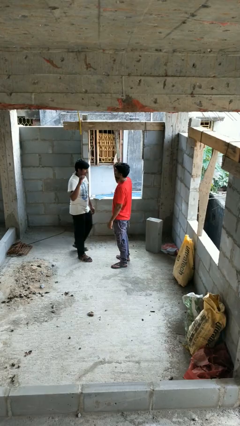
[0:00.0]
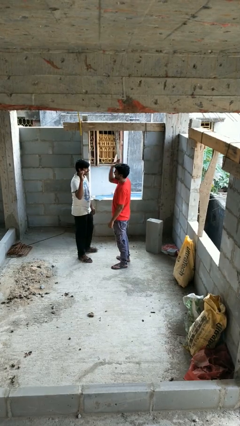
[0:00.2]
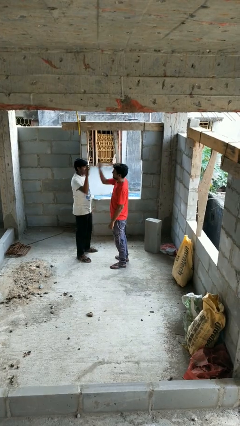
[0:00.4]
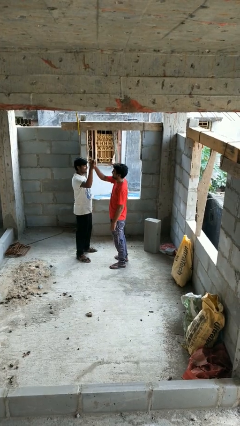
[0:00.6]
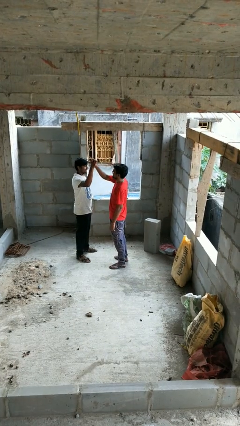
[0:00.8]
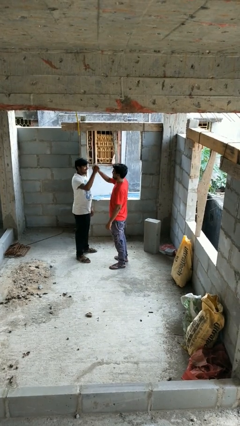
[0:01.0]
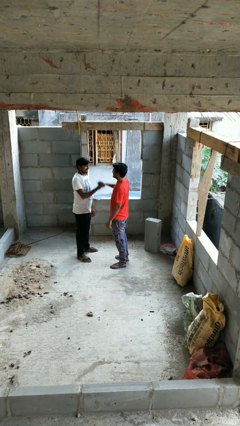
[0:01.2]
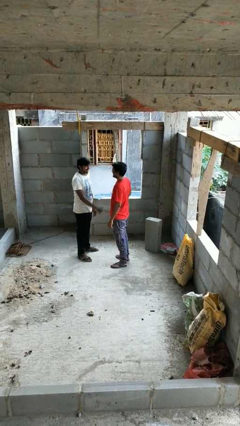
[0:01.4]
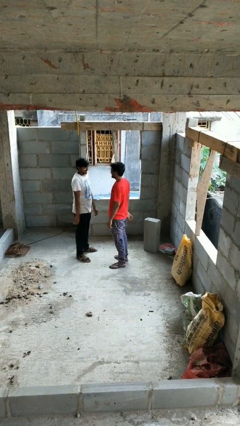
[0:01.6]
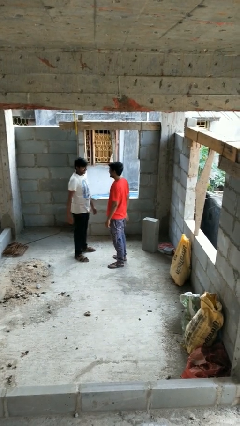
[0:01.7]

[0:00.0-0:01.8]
person highfives hand

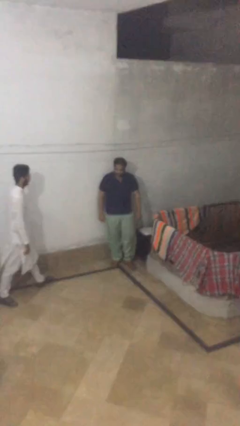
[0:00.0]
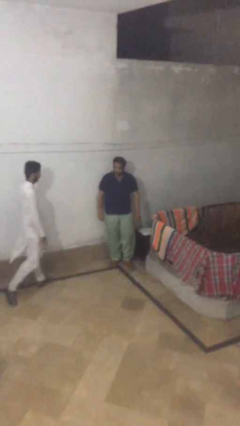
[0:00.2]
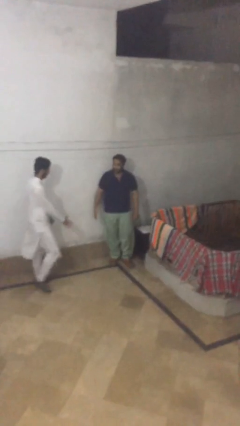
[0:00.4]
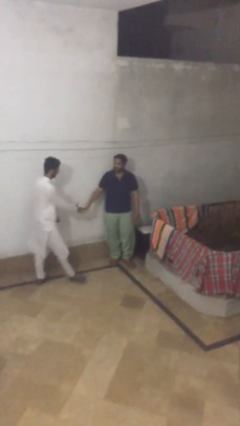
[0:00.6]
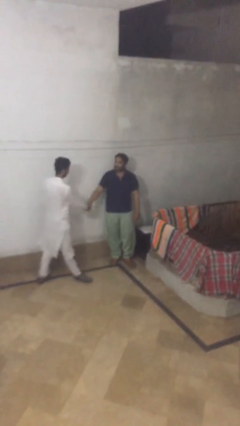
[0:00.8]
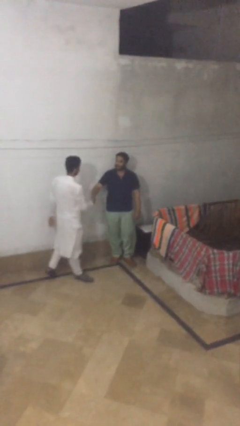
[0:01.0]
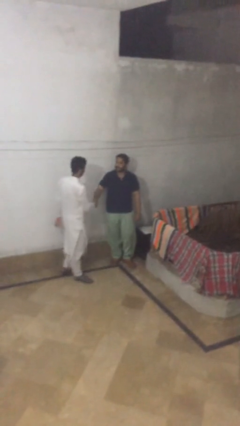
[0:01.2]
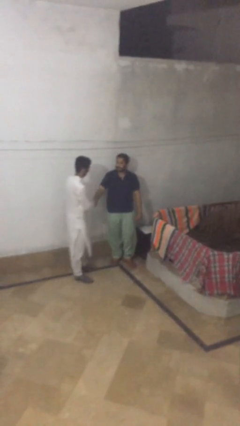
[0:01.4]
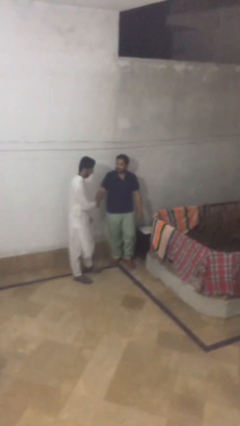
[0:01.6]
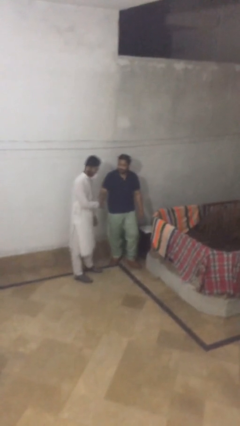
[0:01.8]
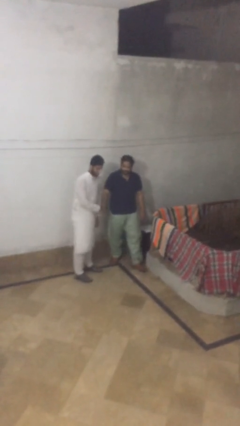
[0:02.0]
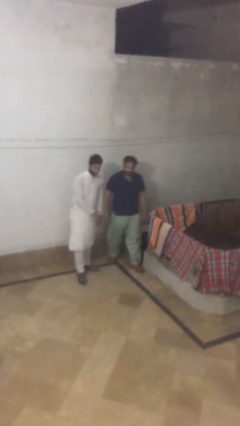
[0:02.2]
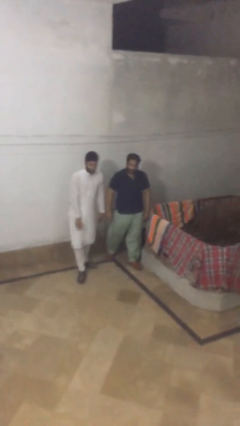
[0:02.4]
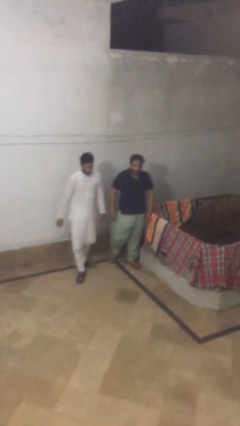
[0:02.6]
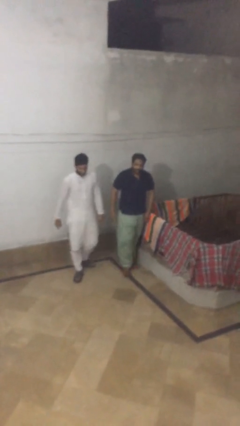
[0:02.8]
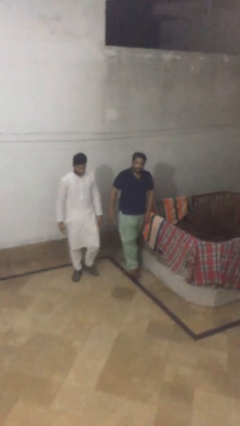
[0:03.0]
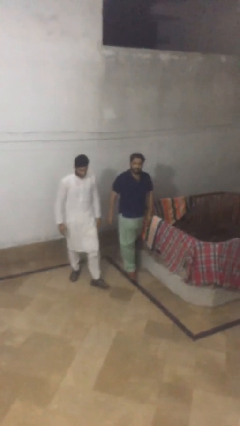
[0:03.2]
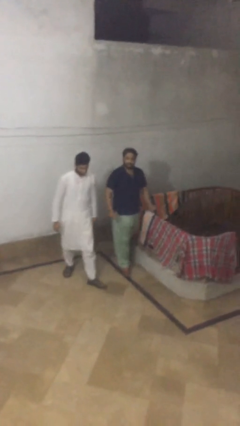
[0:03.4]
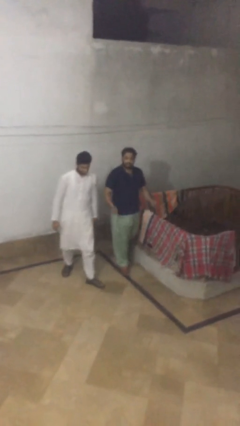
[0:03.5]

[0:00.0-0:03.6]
person shakes hand

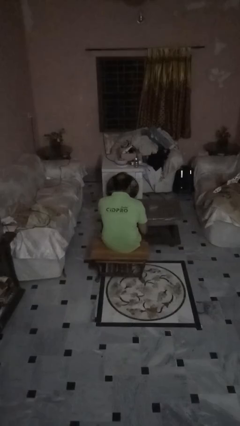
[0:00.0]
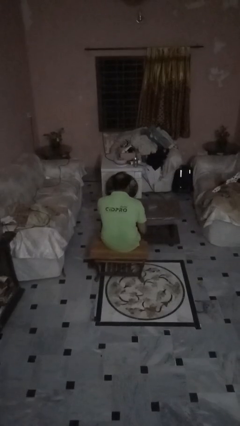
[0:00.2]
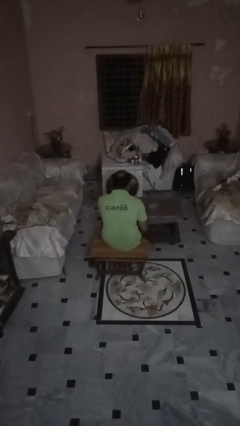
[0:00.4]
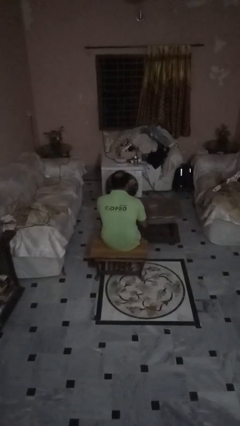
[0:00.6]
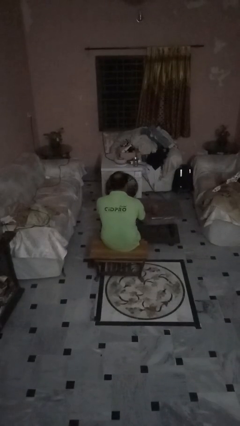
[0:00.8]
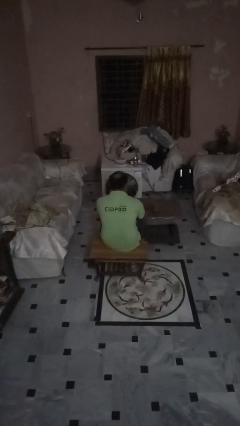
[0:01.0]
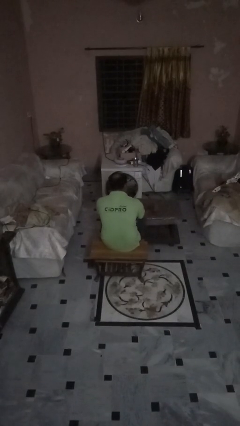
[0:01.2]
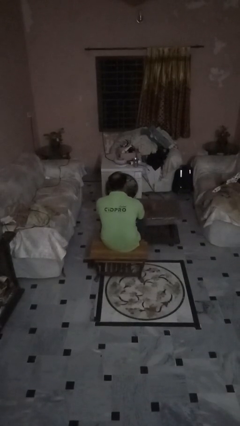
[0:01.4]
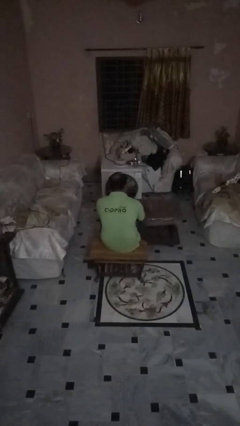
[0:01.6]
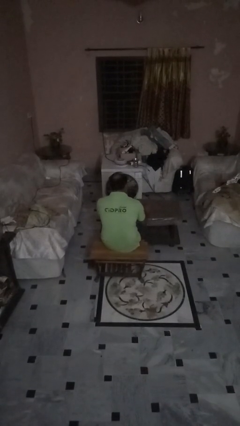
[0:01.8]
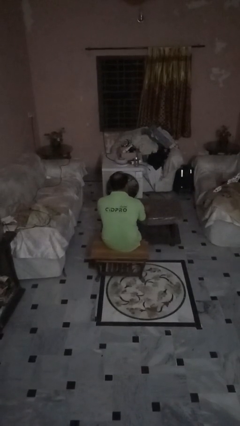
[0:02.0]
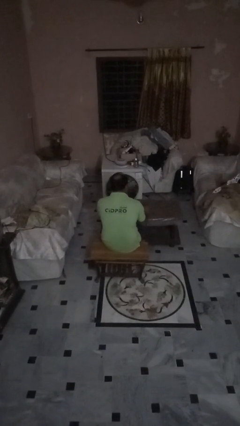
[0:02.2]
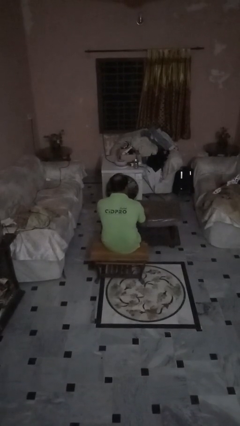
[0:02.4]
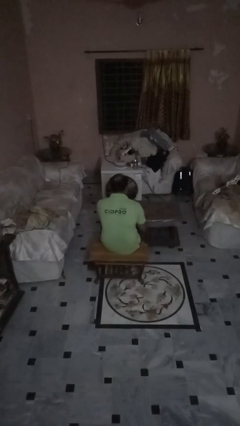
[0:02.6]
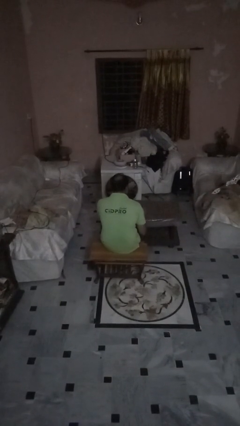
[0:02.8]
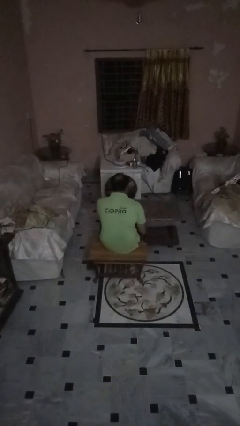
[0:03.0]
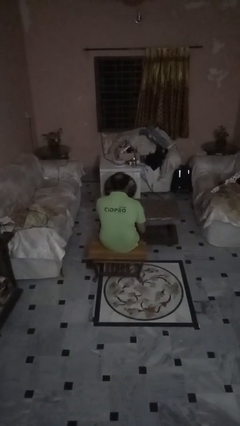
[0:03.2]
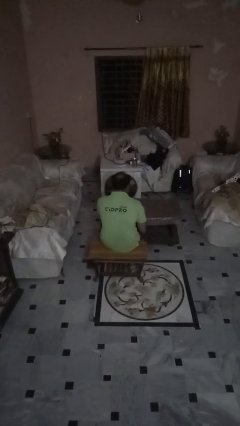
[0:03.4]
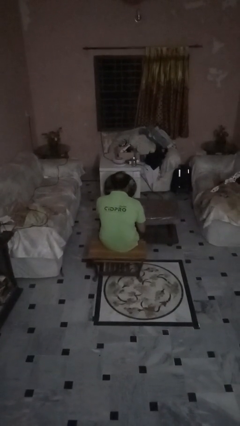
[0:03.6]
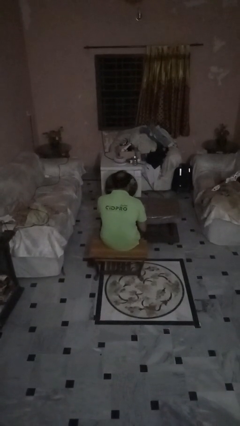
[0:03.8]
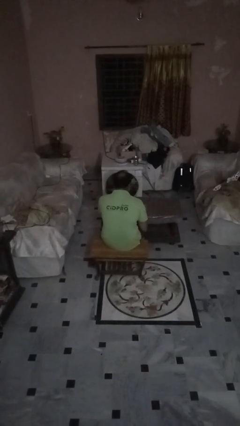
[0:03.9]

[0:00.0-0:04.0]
person sets upright glass

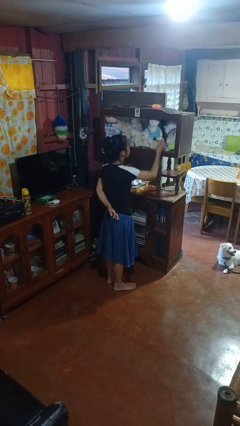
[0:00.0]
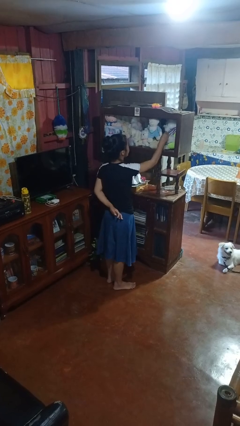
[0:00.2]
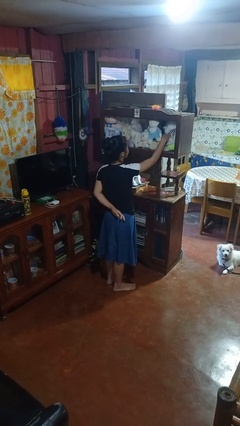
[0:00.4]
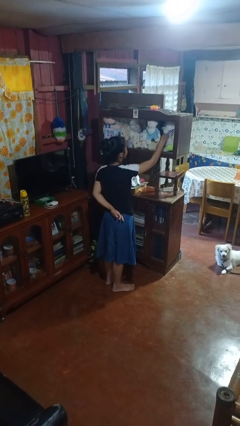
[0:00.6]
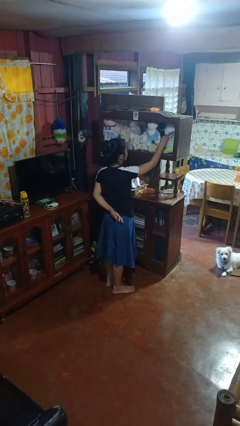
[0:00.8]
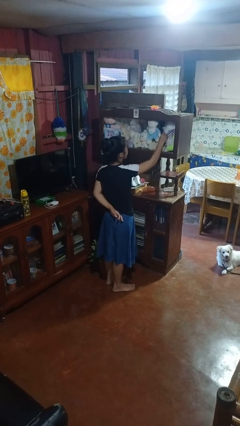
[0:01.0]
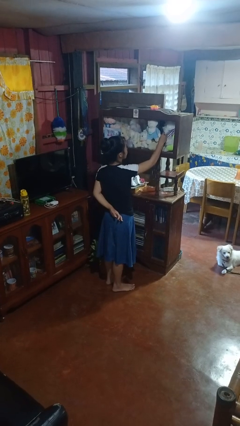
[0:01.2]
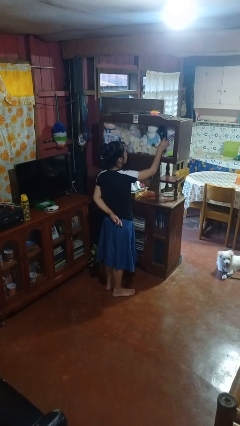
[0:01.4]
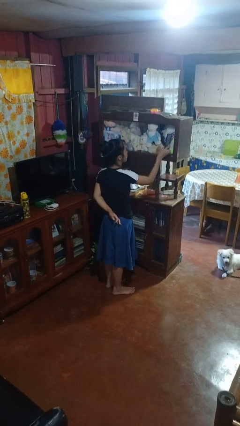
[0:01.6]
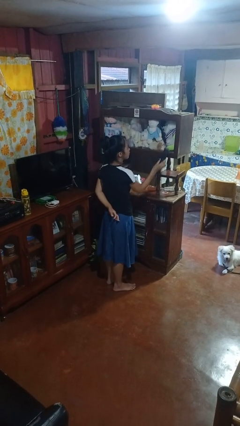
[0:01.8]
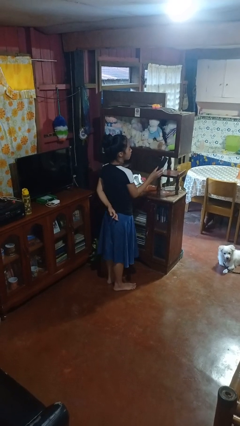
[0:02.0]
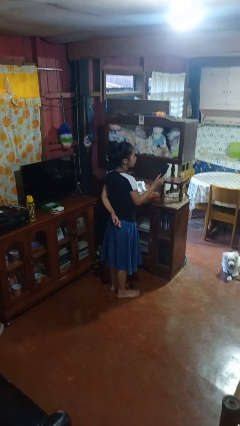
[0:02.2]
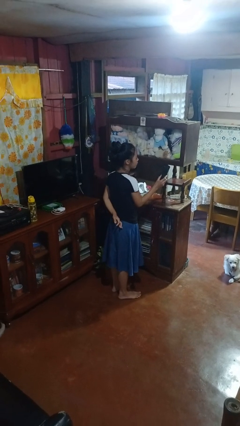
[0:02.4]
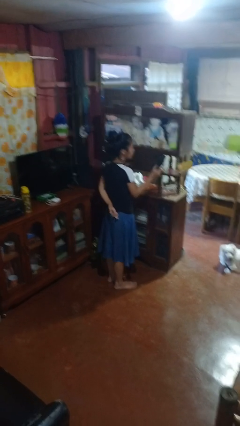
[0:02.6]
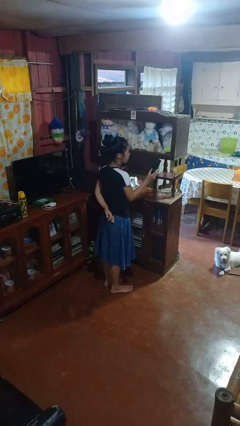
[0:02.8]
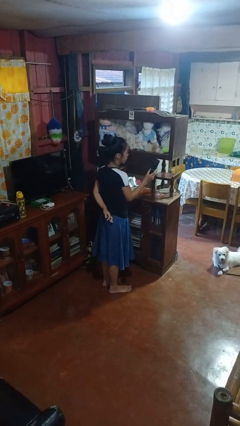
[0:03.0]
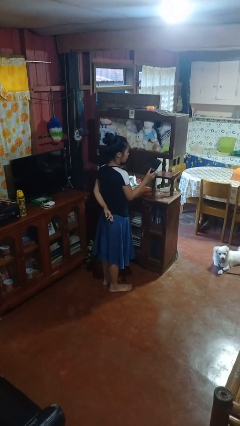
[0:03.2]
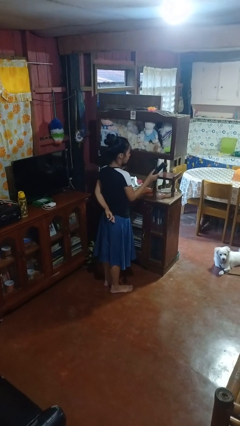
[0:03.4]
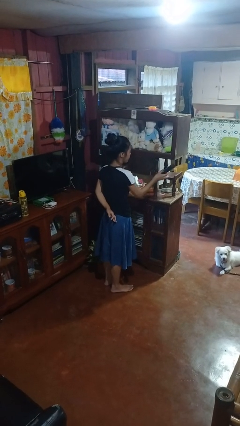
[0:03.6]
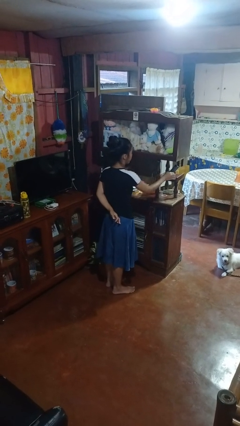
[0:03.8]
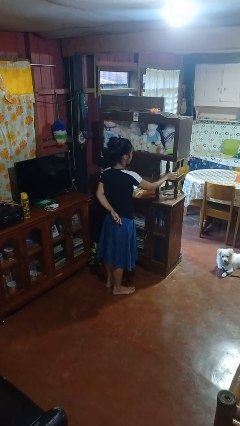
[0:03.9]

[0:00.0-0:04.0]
person picks up object from shelf

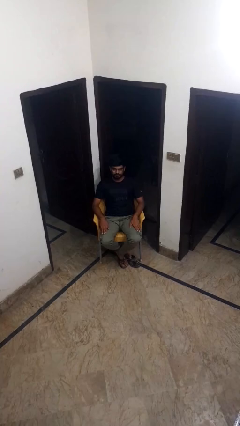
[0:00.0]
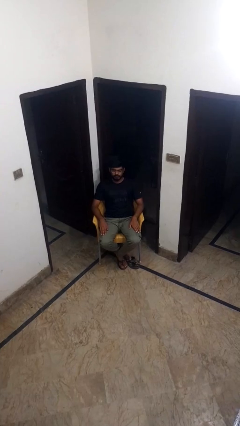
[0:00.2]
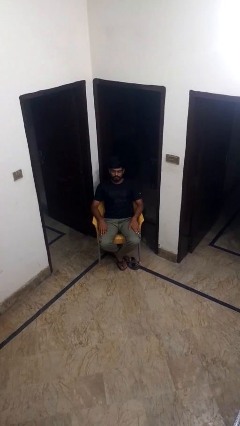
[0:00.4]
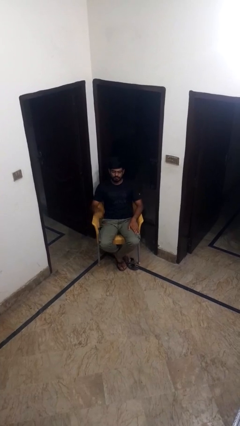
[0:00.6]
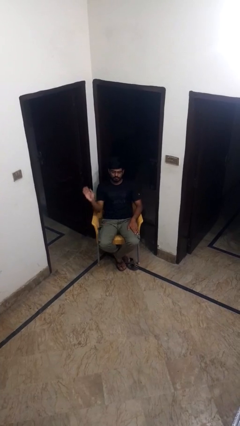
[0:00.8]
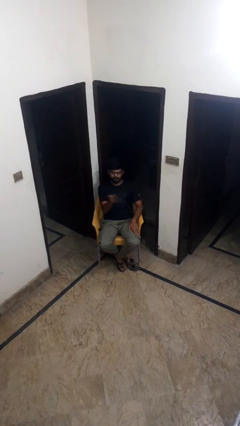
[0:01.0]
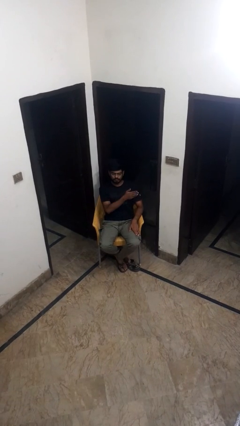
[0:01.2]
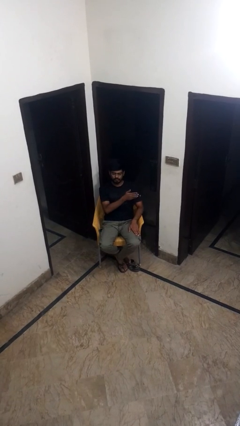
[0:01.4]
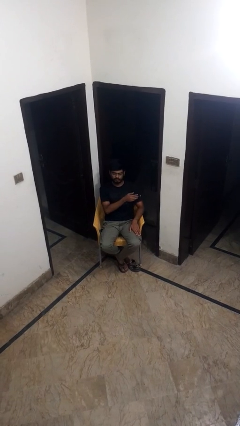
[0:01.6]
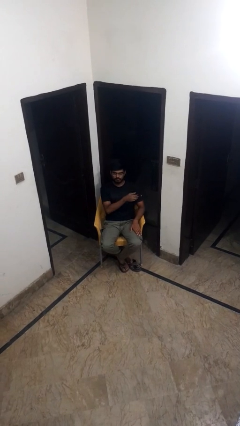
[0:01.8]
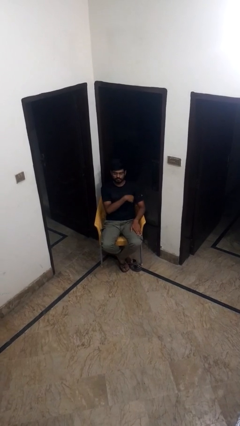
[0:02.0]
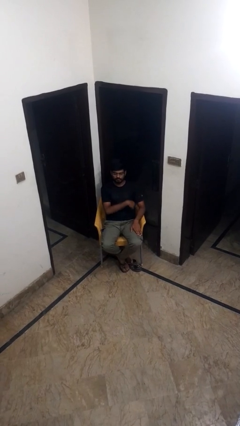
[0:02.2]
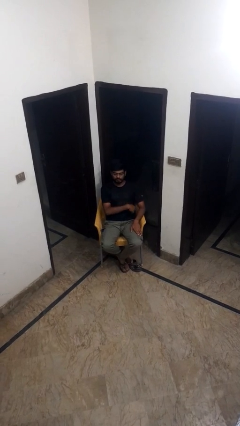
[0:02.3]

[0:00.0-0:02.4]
person gestures swipe left

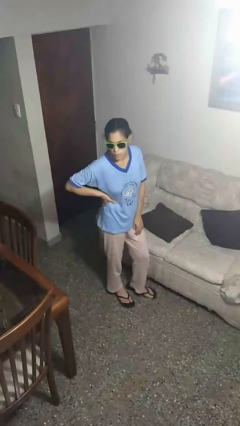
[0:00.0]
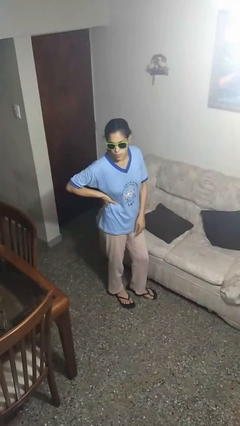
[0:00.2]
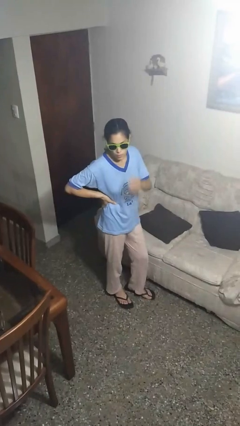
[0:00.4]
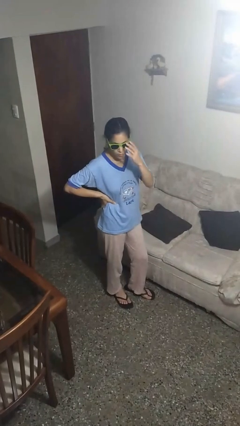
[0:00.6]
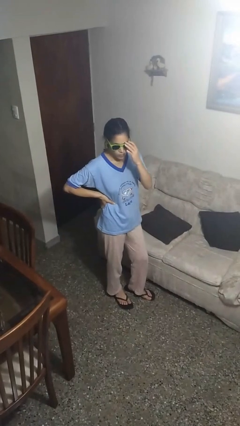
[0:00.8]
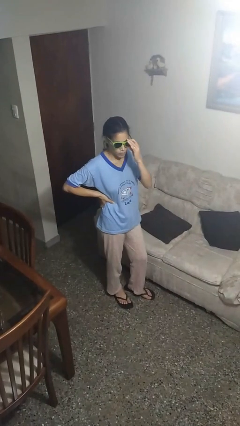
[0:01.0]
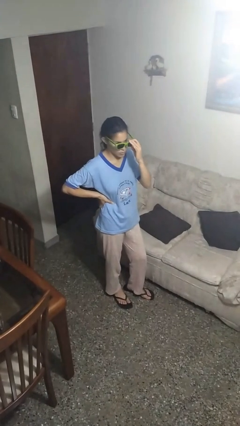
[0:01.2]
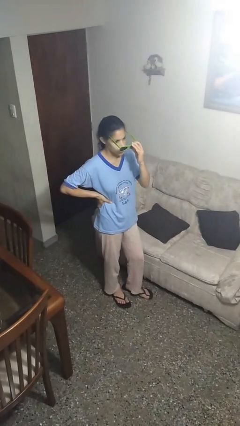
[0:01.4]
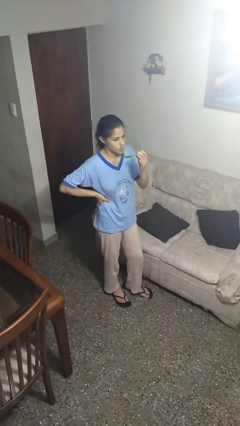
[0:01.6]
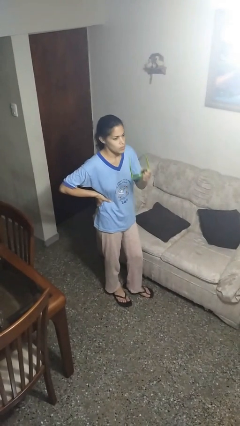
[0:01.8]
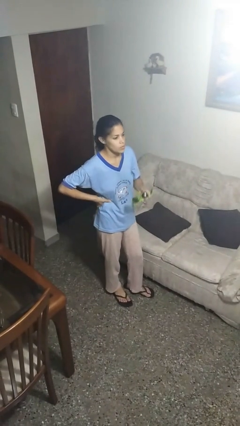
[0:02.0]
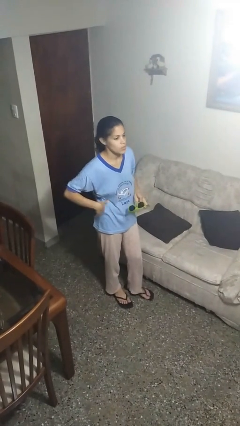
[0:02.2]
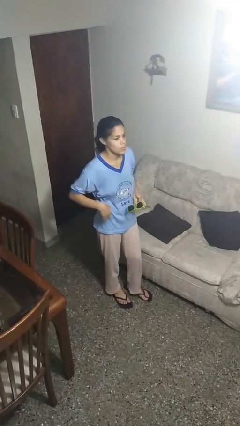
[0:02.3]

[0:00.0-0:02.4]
person takes off sunglasses
